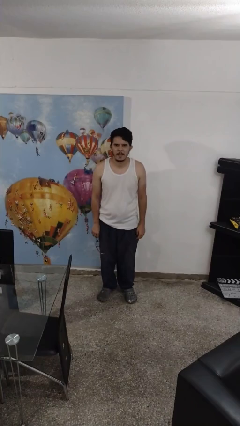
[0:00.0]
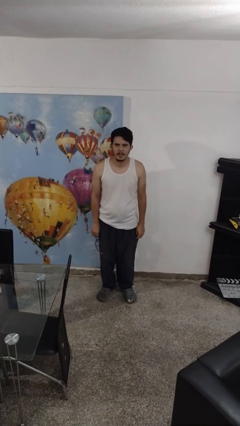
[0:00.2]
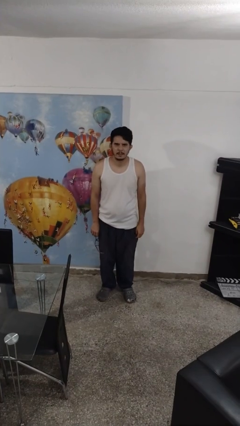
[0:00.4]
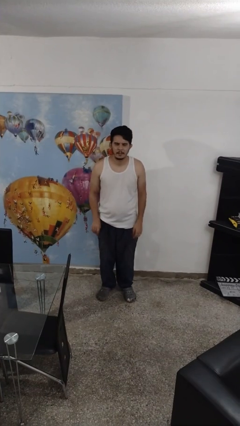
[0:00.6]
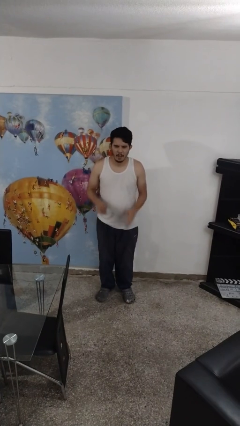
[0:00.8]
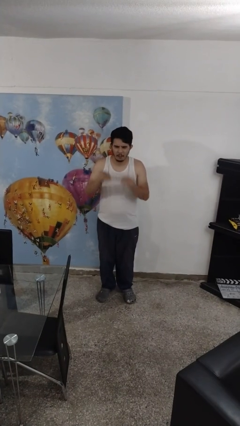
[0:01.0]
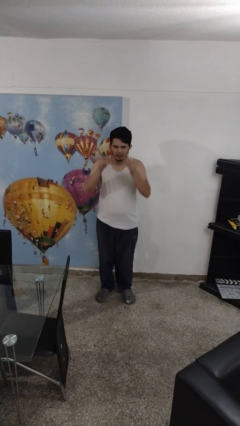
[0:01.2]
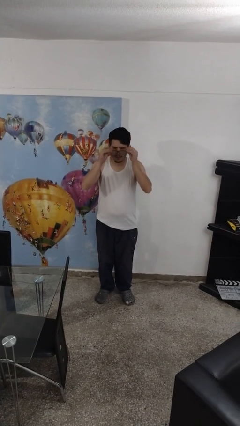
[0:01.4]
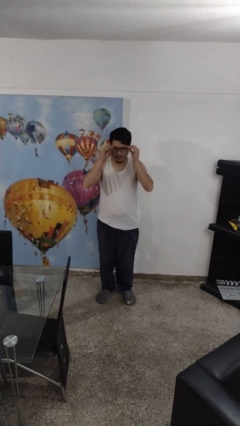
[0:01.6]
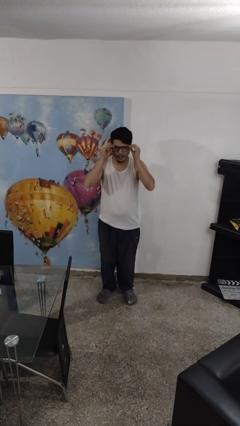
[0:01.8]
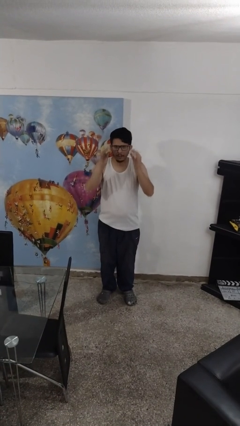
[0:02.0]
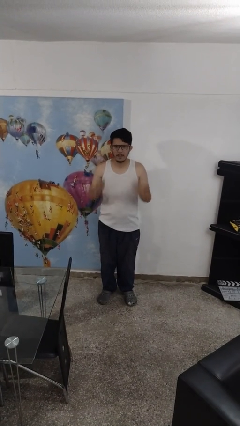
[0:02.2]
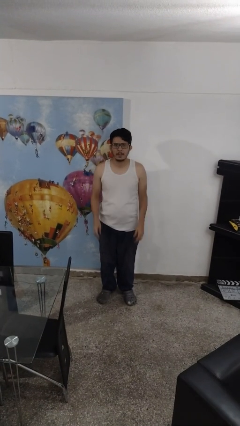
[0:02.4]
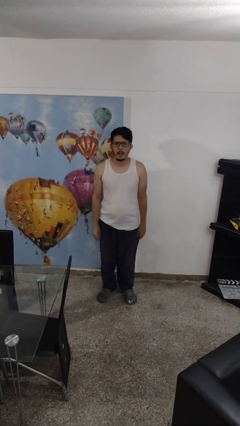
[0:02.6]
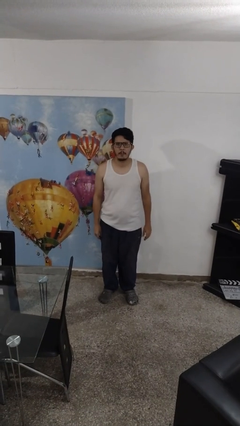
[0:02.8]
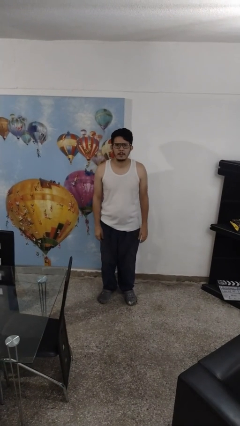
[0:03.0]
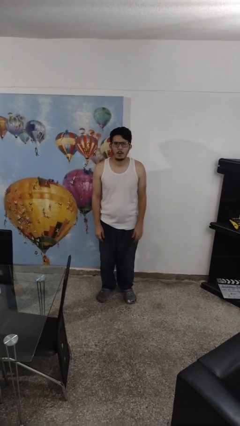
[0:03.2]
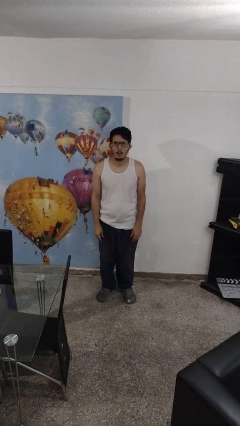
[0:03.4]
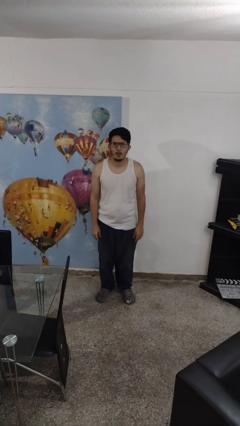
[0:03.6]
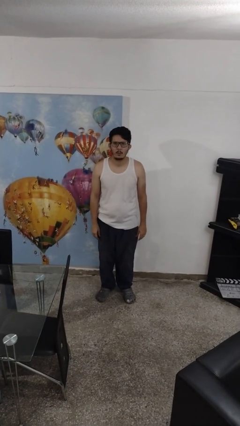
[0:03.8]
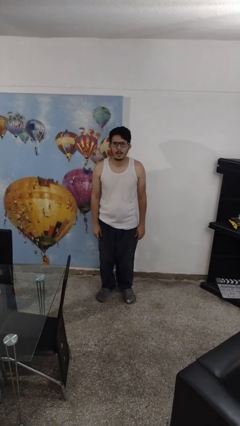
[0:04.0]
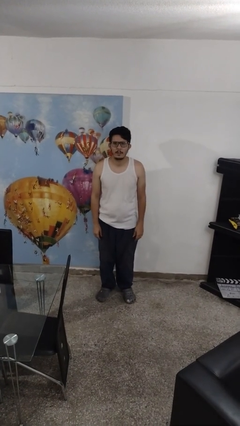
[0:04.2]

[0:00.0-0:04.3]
person puts on glasses

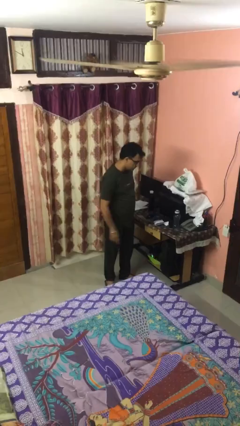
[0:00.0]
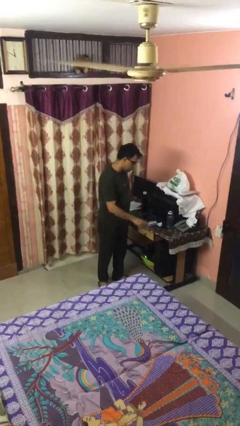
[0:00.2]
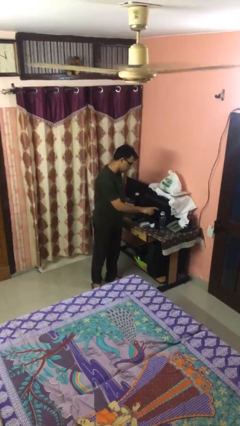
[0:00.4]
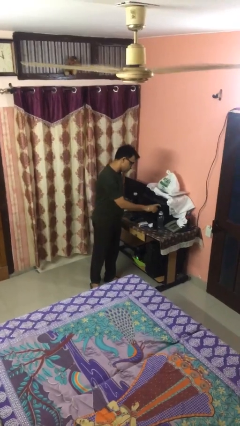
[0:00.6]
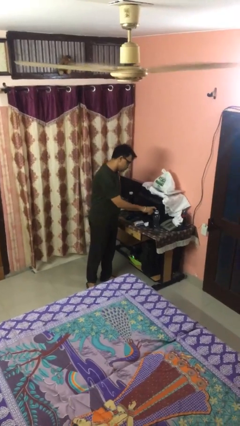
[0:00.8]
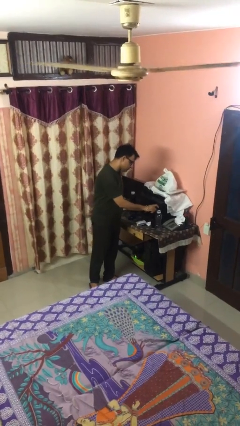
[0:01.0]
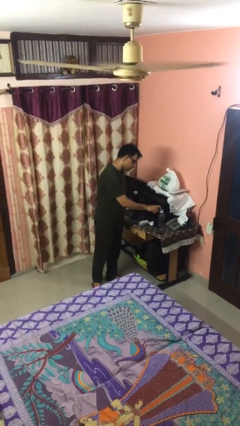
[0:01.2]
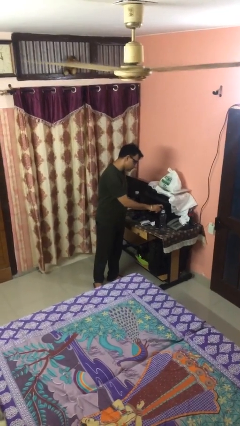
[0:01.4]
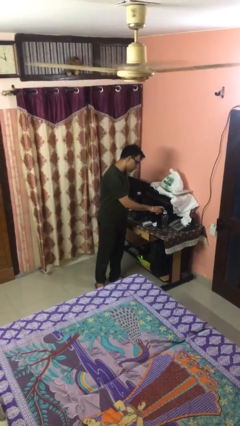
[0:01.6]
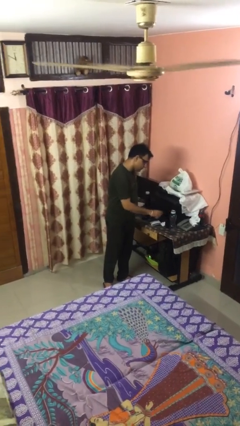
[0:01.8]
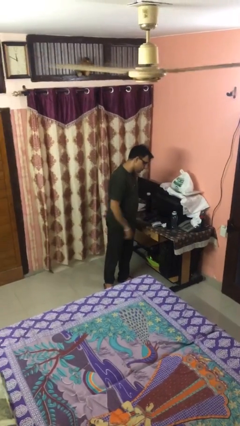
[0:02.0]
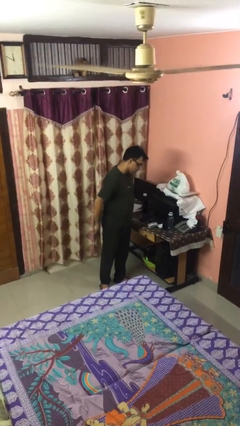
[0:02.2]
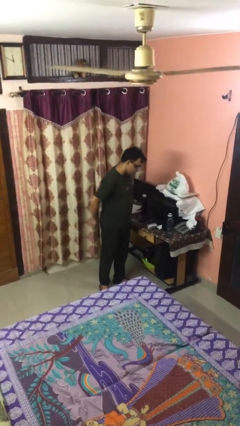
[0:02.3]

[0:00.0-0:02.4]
person taps object with finger

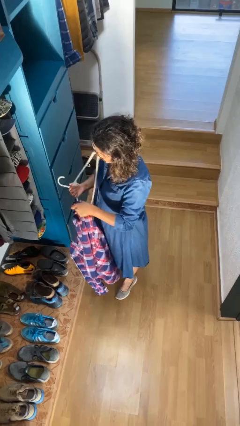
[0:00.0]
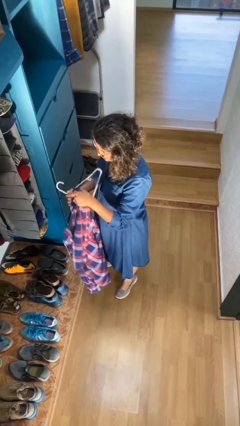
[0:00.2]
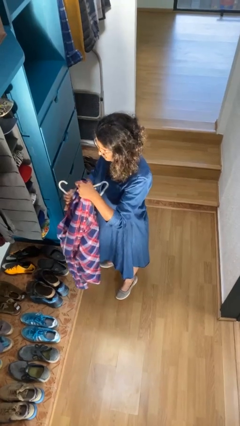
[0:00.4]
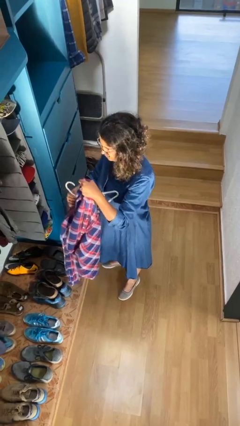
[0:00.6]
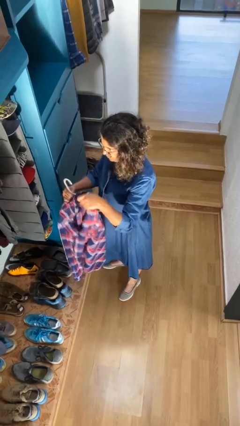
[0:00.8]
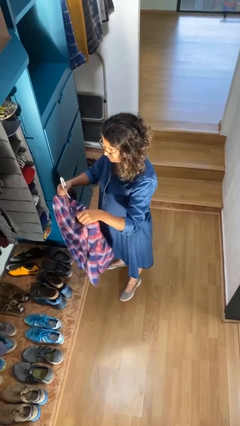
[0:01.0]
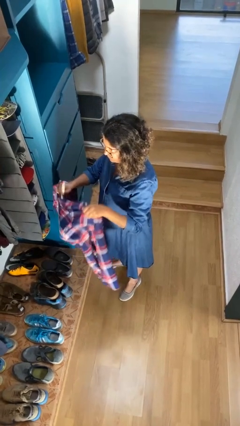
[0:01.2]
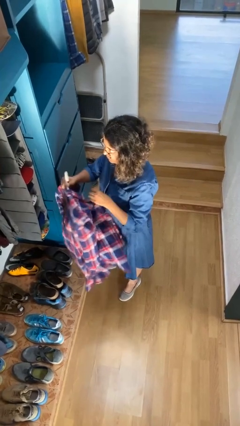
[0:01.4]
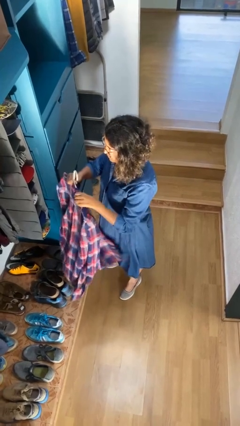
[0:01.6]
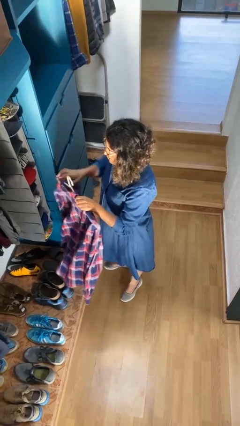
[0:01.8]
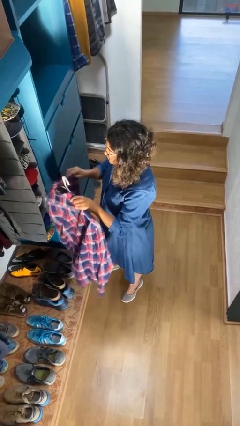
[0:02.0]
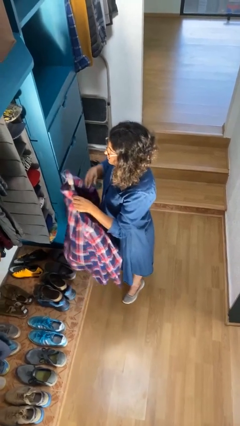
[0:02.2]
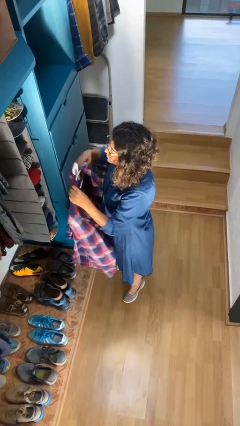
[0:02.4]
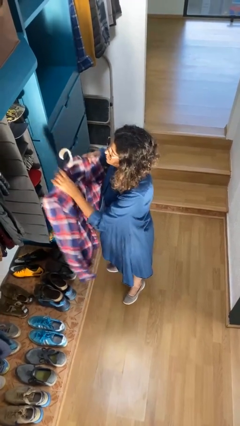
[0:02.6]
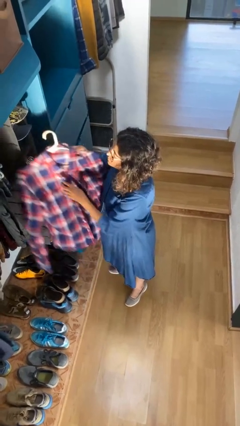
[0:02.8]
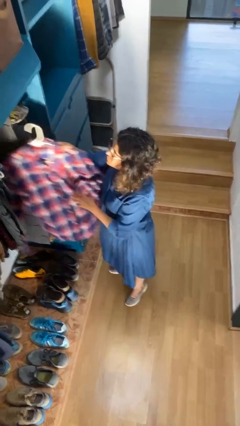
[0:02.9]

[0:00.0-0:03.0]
person puts clothes into closet

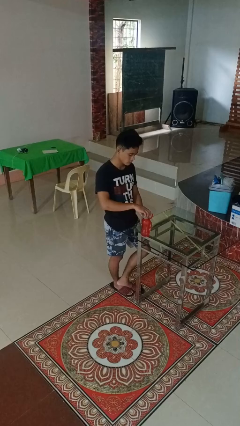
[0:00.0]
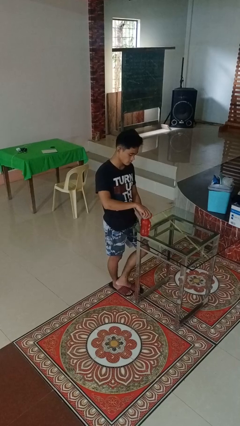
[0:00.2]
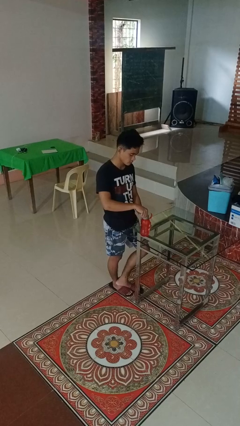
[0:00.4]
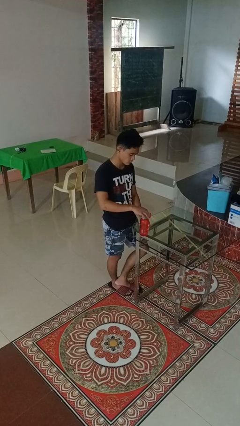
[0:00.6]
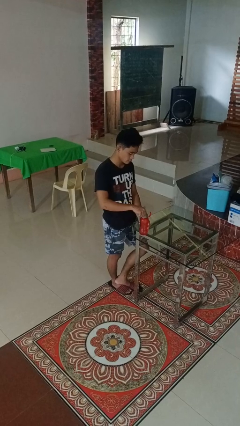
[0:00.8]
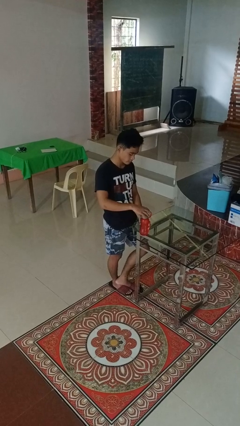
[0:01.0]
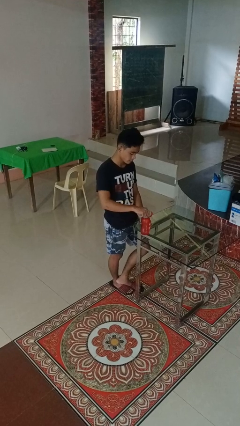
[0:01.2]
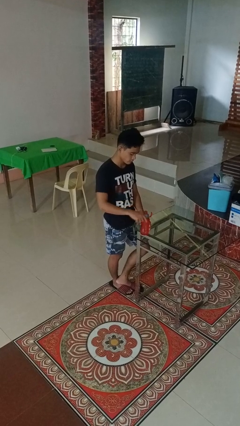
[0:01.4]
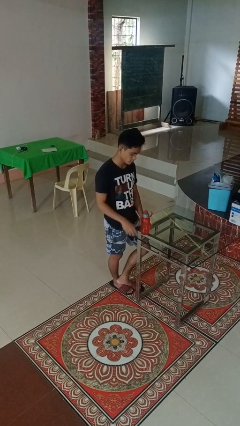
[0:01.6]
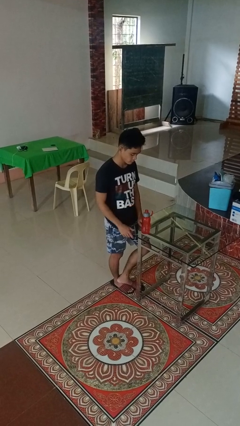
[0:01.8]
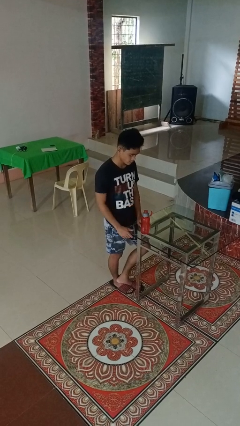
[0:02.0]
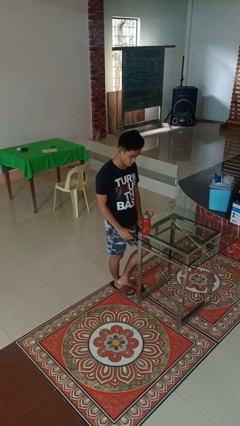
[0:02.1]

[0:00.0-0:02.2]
person screws lid to bottle

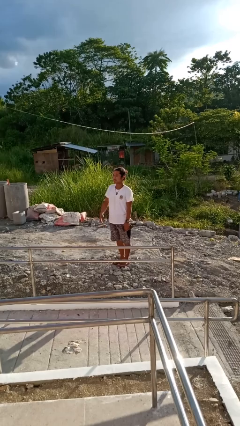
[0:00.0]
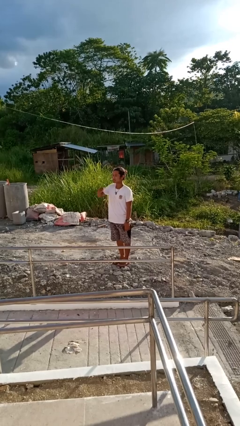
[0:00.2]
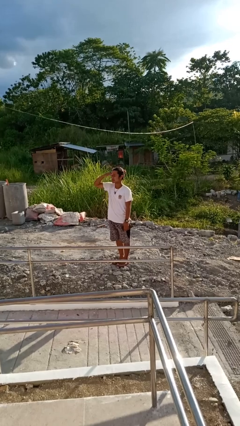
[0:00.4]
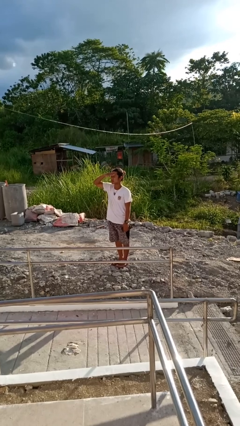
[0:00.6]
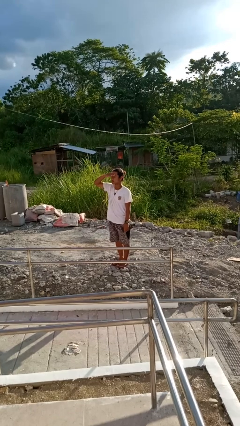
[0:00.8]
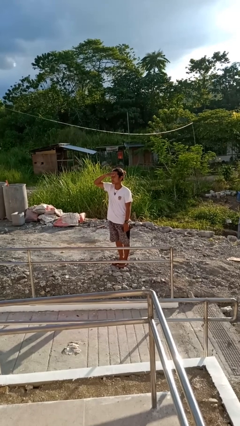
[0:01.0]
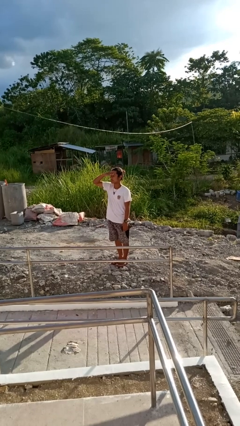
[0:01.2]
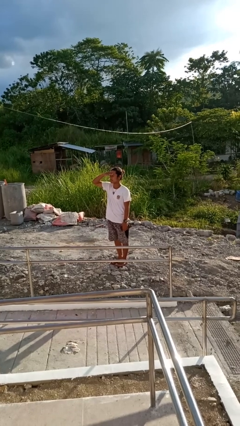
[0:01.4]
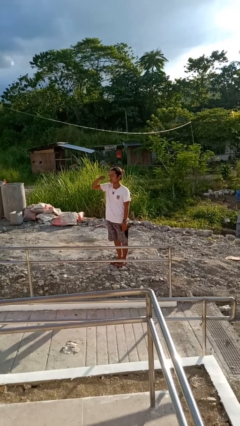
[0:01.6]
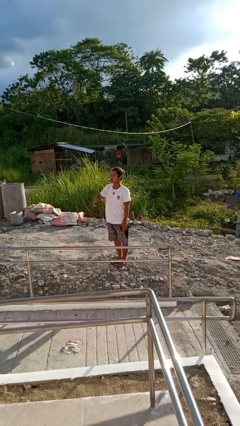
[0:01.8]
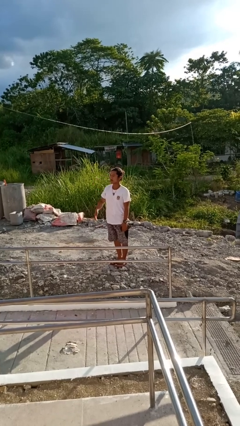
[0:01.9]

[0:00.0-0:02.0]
person shades eyes

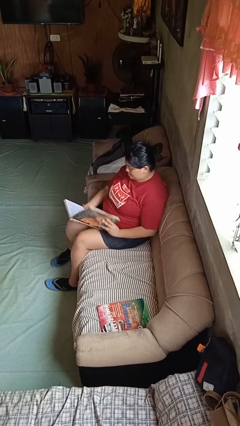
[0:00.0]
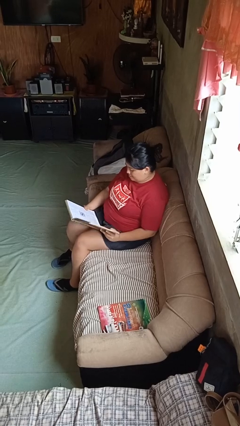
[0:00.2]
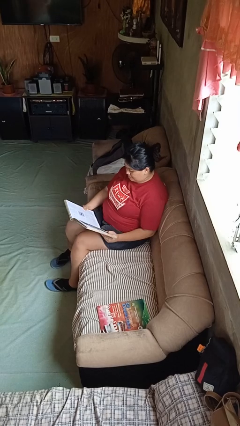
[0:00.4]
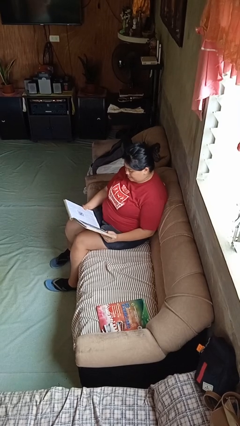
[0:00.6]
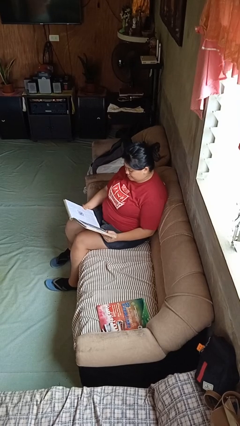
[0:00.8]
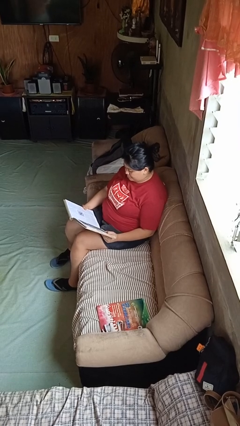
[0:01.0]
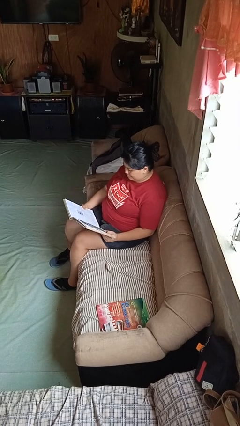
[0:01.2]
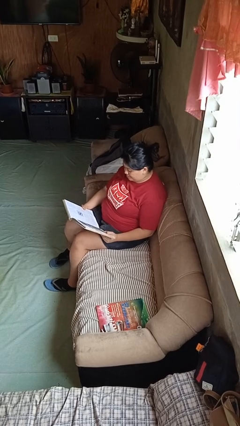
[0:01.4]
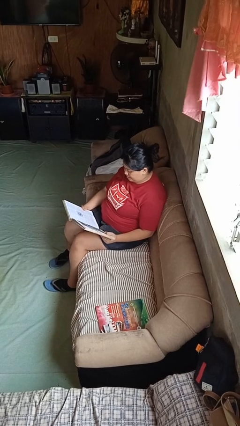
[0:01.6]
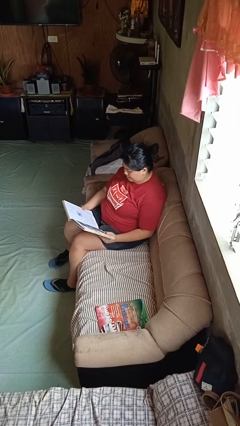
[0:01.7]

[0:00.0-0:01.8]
person reads book

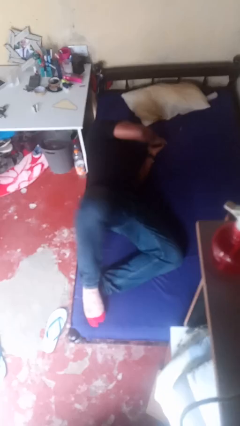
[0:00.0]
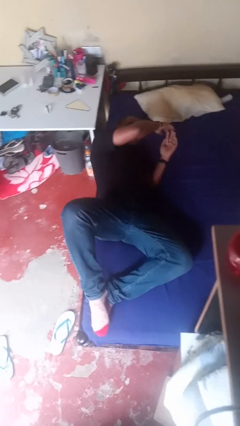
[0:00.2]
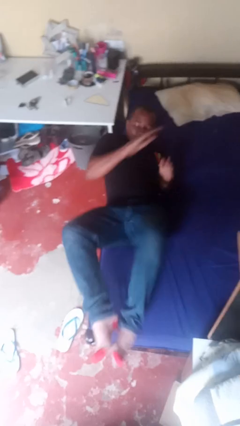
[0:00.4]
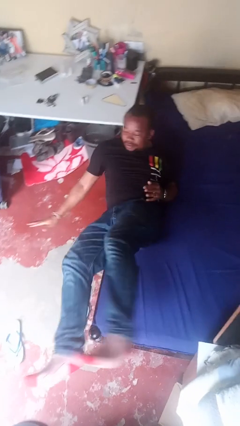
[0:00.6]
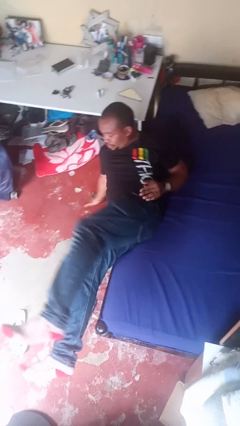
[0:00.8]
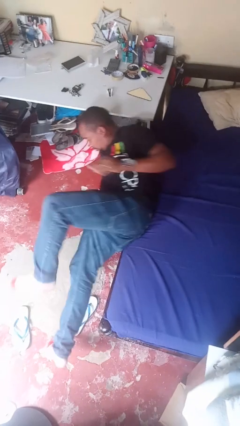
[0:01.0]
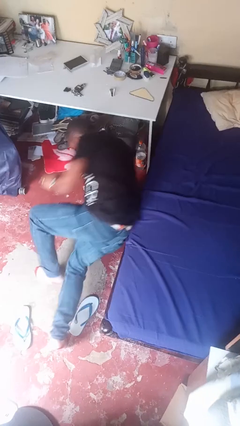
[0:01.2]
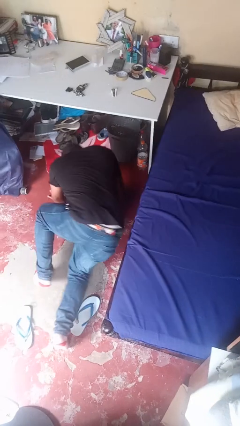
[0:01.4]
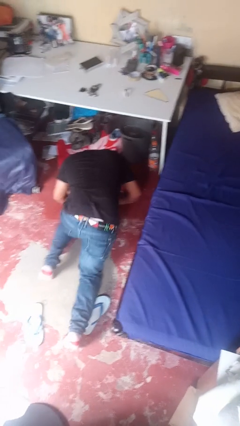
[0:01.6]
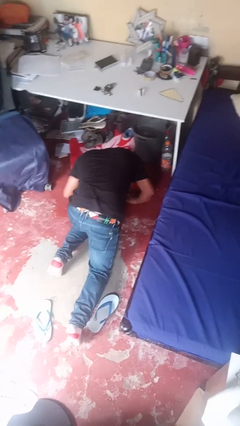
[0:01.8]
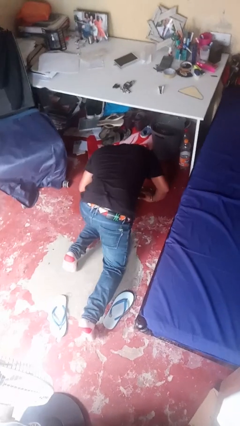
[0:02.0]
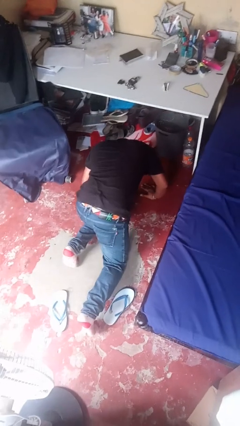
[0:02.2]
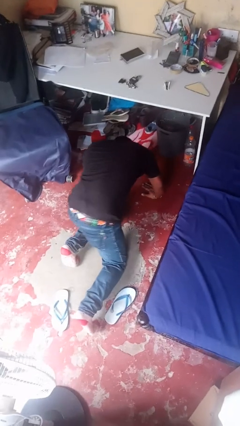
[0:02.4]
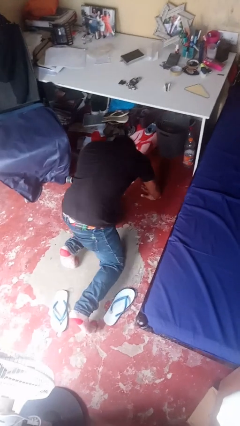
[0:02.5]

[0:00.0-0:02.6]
person falls from bed
